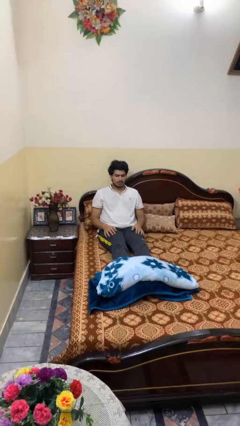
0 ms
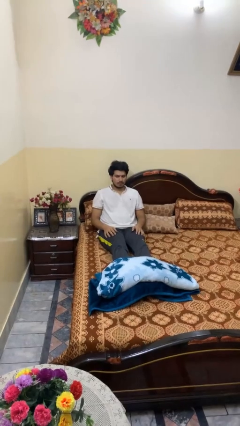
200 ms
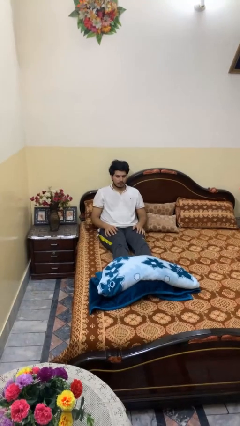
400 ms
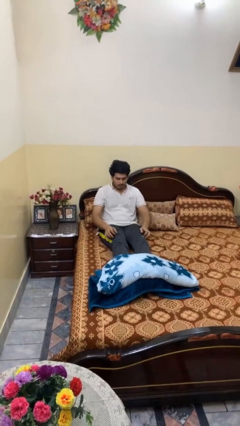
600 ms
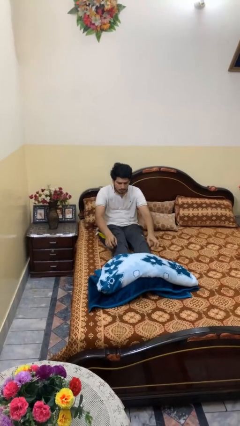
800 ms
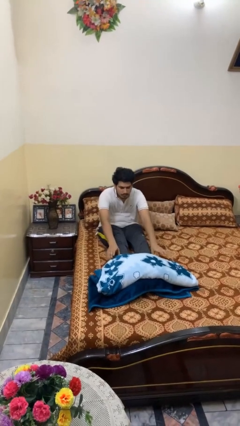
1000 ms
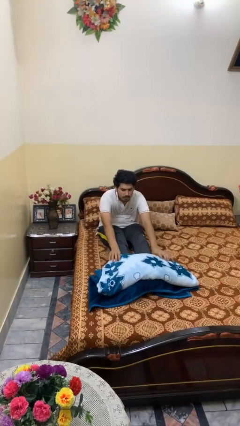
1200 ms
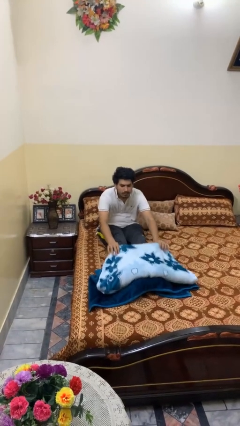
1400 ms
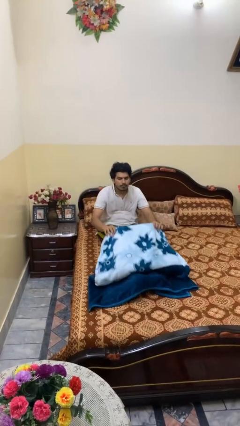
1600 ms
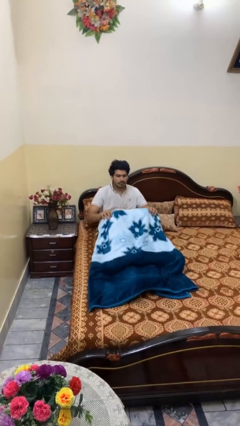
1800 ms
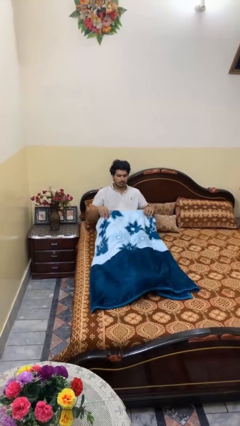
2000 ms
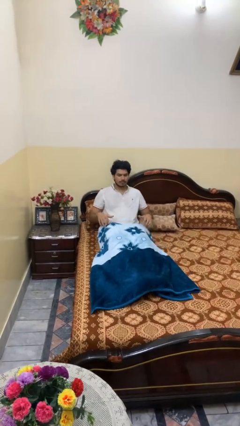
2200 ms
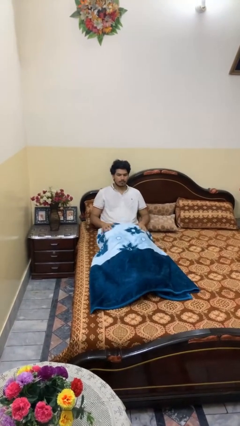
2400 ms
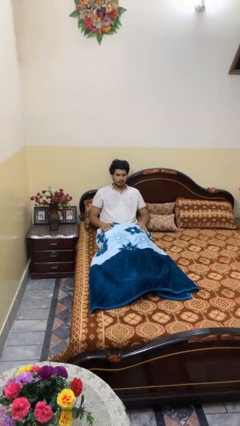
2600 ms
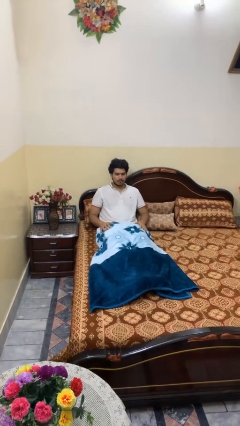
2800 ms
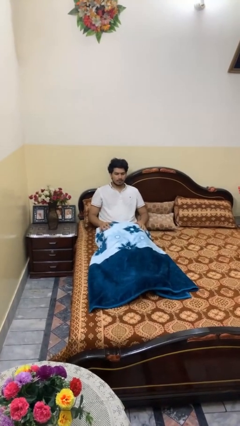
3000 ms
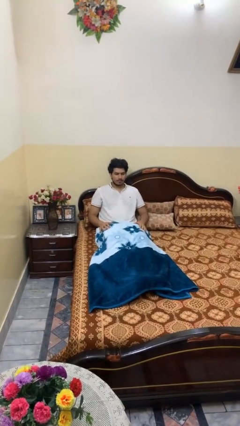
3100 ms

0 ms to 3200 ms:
person covers with blanket

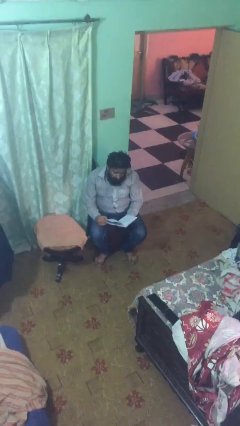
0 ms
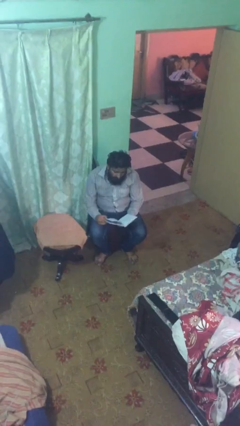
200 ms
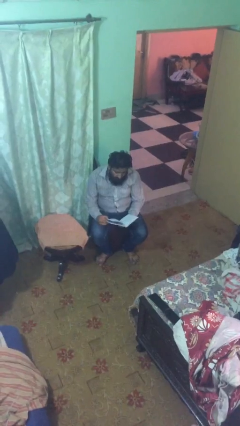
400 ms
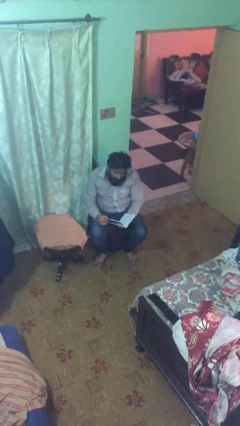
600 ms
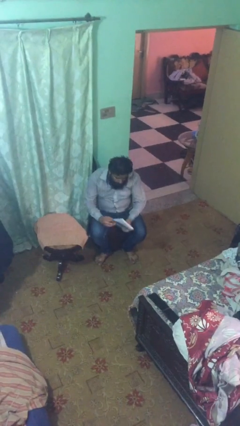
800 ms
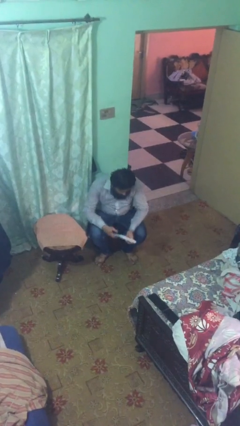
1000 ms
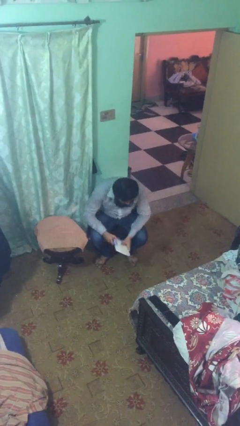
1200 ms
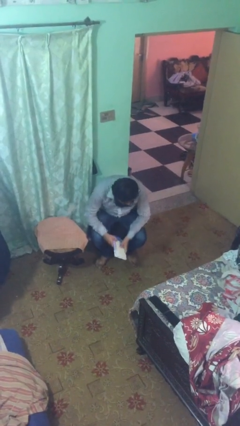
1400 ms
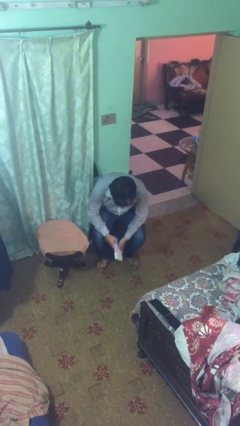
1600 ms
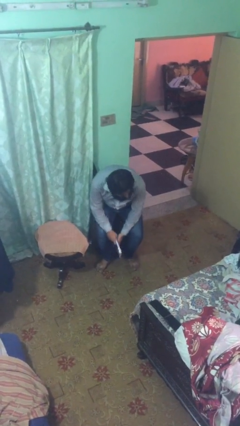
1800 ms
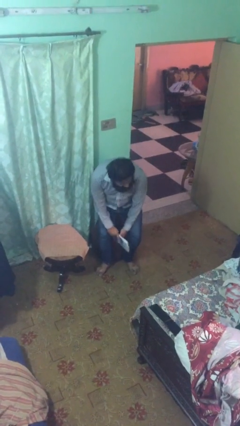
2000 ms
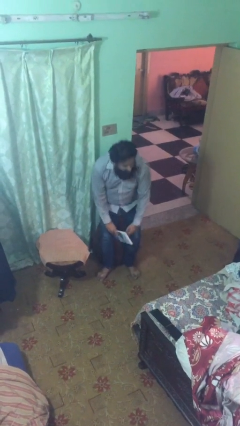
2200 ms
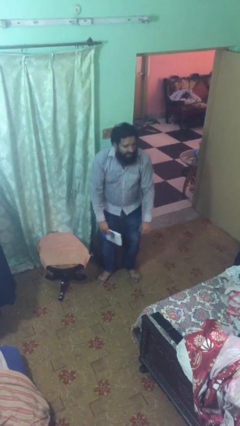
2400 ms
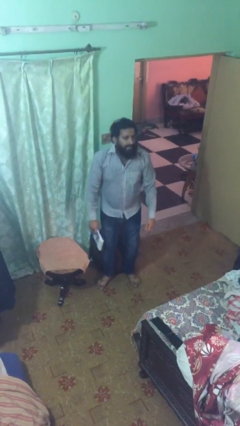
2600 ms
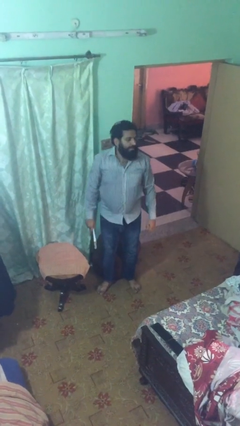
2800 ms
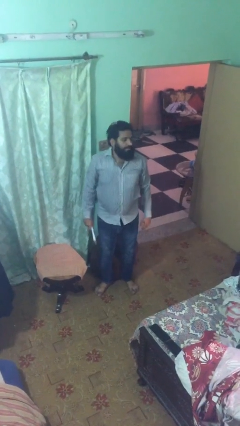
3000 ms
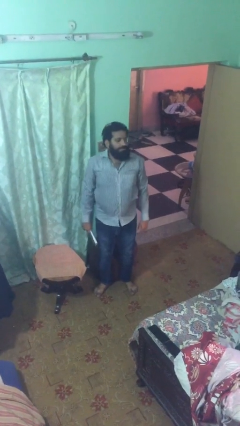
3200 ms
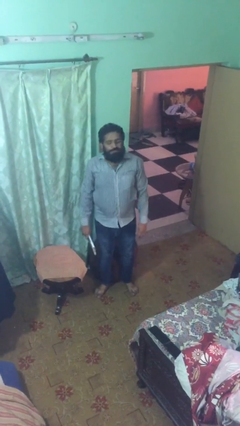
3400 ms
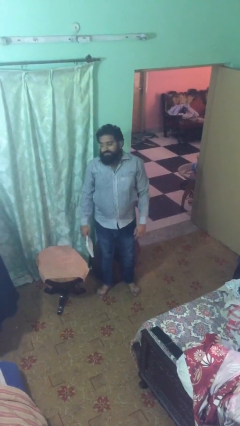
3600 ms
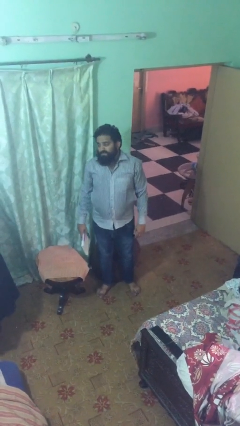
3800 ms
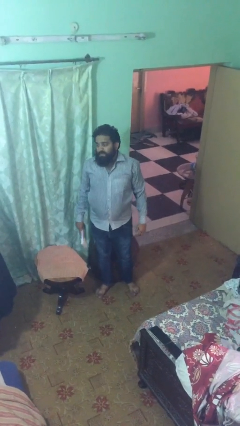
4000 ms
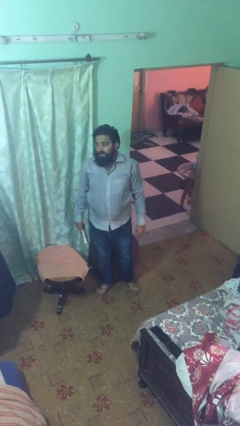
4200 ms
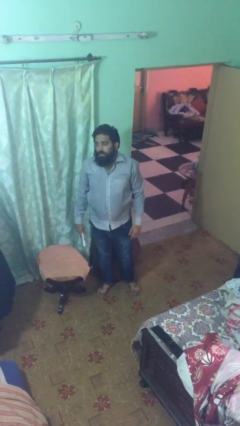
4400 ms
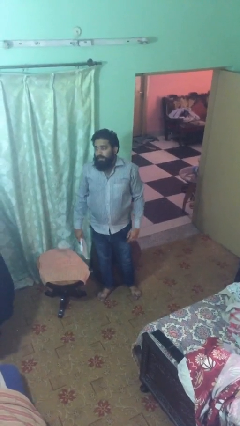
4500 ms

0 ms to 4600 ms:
person stands up

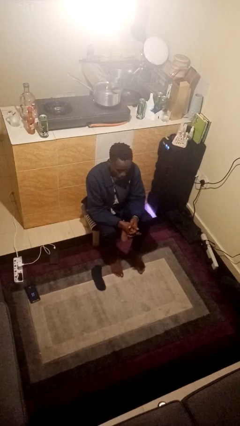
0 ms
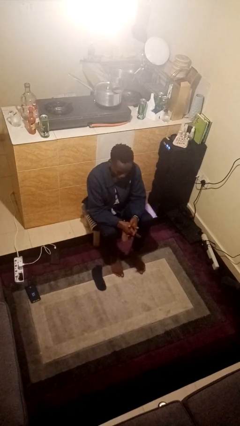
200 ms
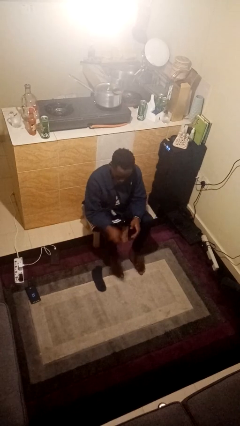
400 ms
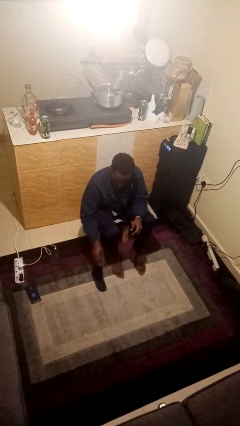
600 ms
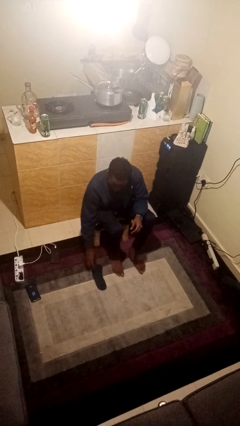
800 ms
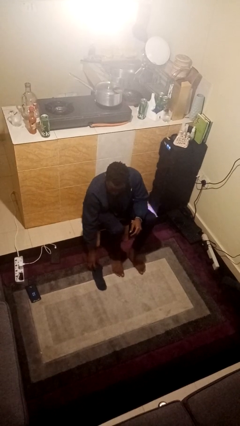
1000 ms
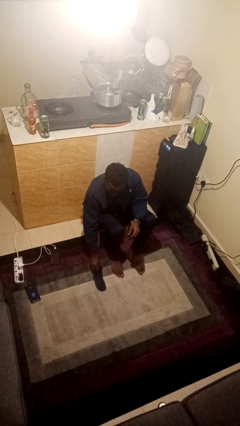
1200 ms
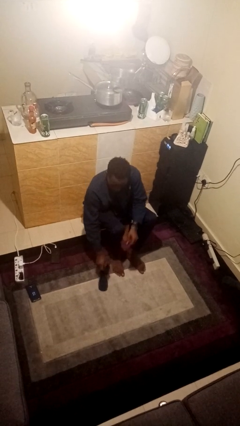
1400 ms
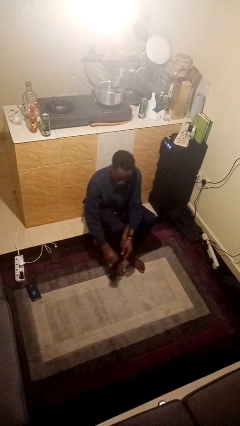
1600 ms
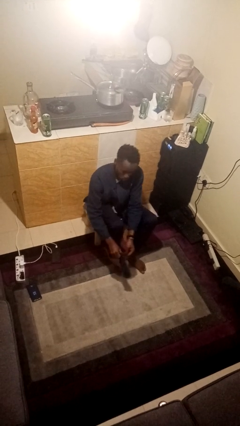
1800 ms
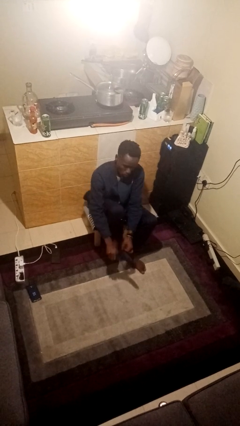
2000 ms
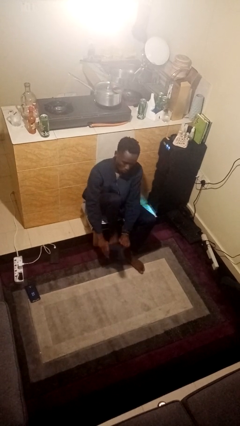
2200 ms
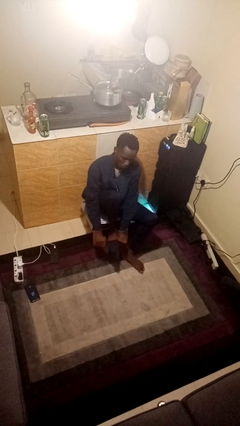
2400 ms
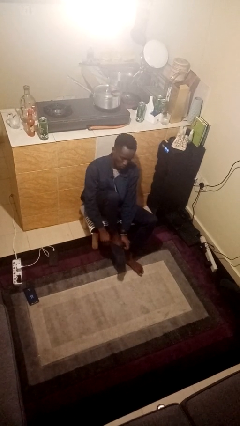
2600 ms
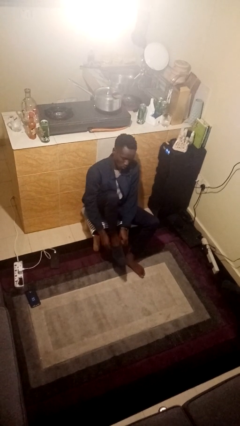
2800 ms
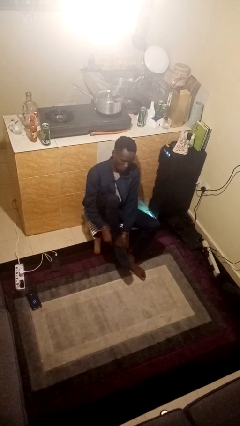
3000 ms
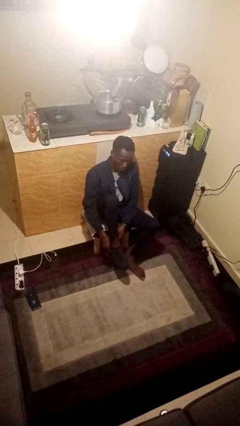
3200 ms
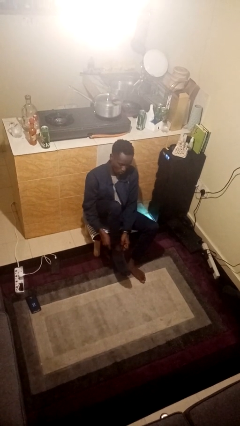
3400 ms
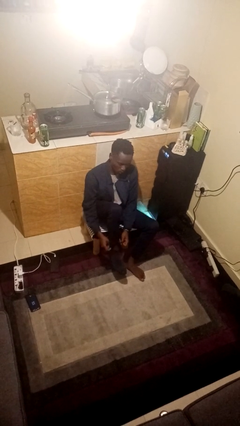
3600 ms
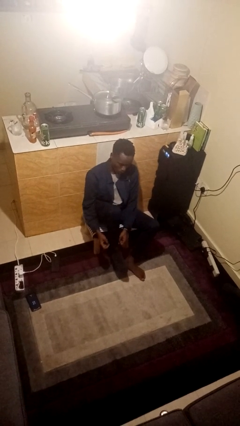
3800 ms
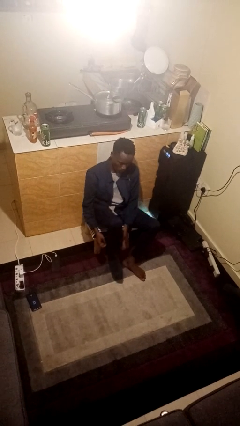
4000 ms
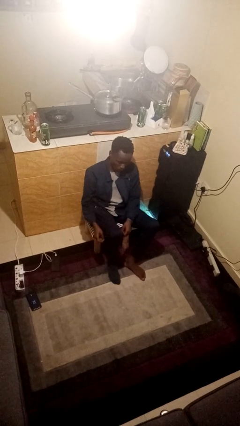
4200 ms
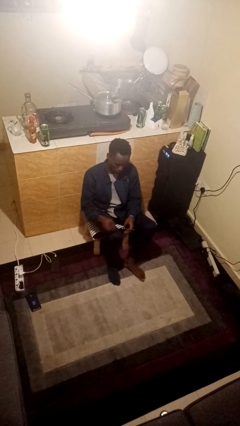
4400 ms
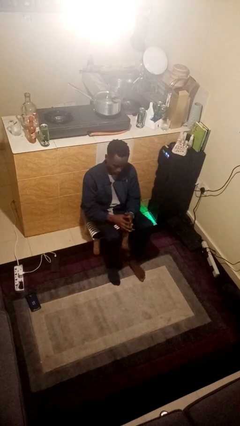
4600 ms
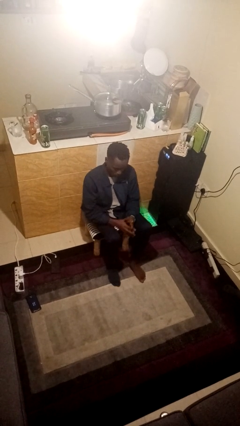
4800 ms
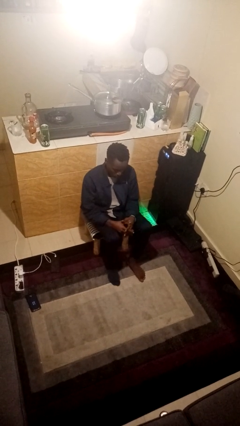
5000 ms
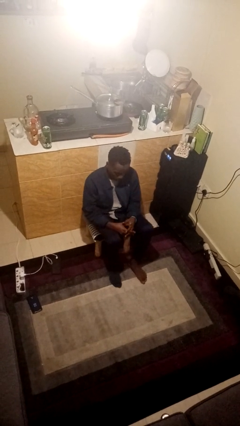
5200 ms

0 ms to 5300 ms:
person puts on socks

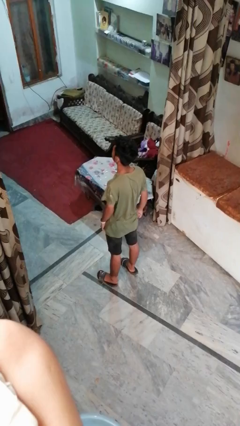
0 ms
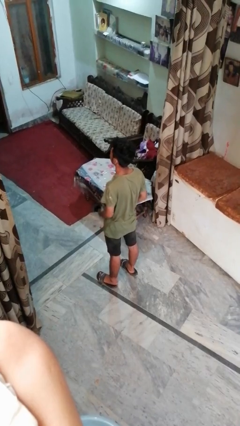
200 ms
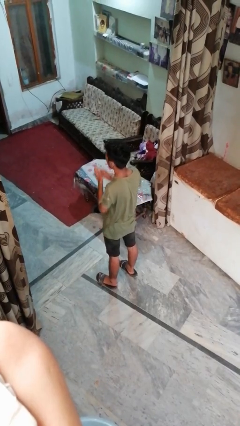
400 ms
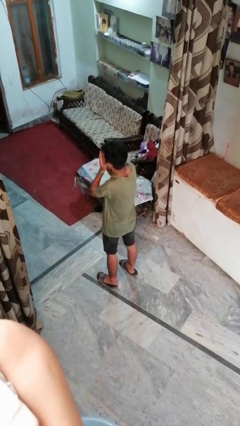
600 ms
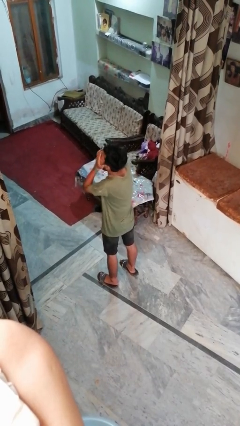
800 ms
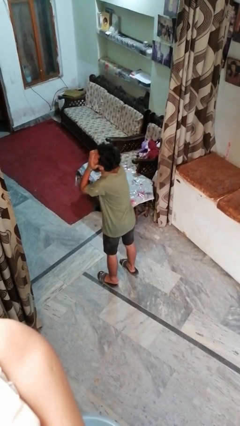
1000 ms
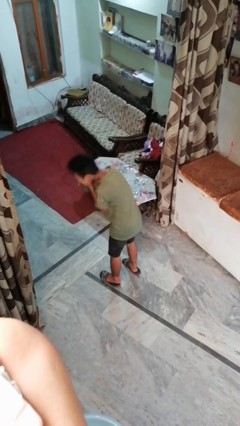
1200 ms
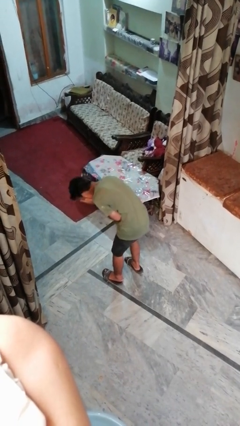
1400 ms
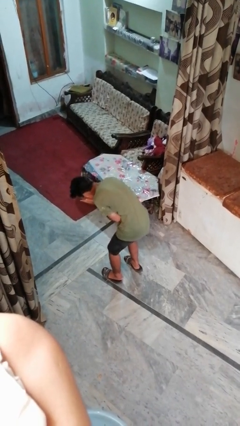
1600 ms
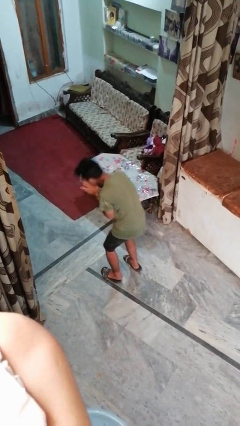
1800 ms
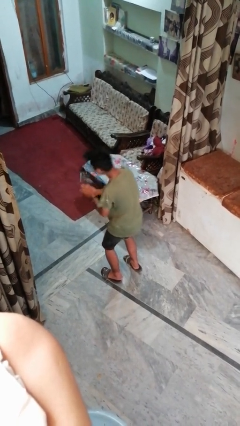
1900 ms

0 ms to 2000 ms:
person sneezes into hand

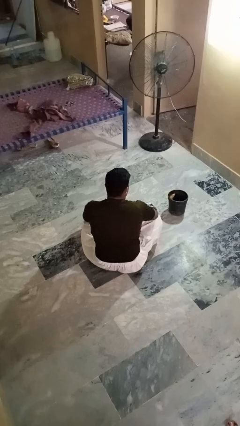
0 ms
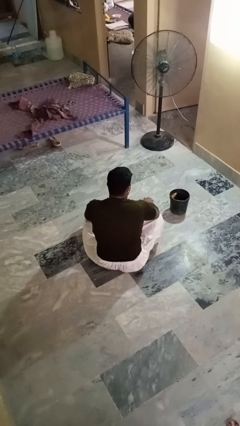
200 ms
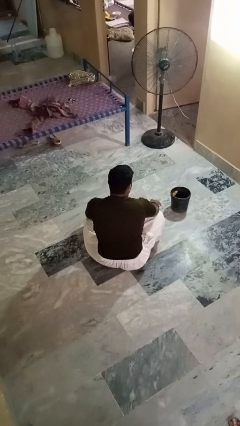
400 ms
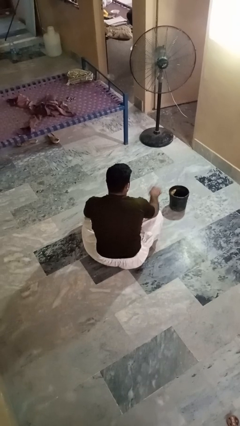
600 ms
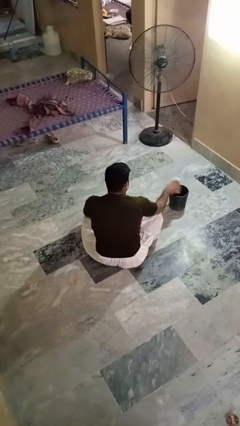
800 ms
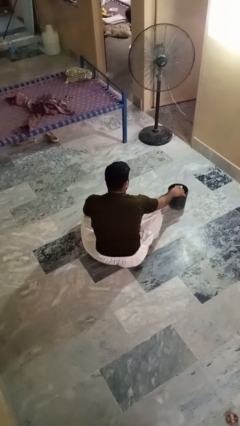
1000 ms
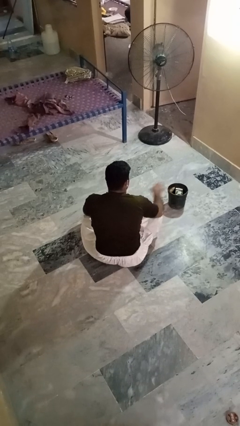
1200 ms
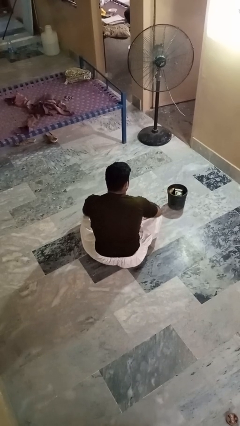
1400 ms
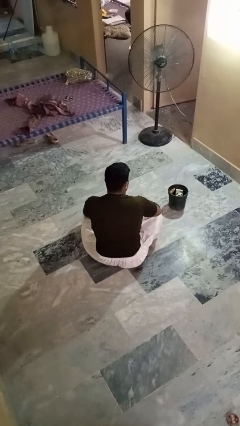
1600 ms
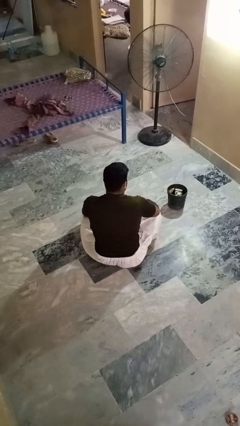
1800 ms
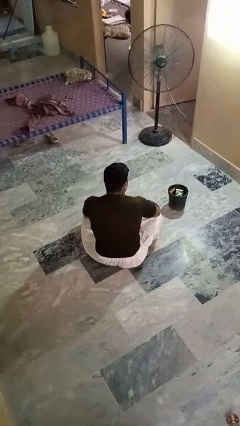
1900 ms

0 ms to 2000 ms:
person puts object into basket

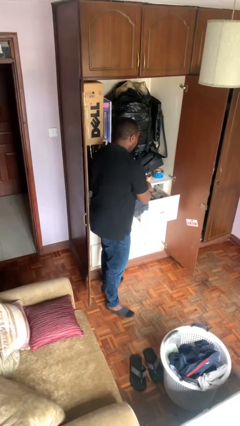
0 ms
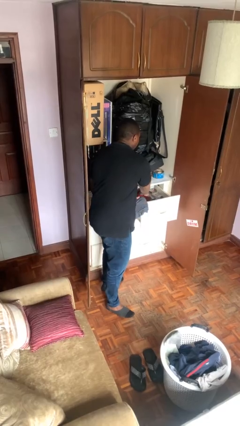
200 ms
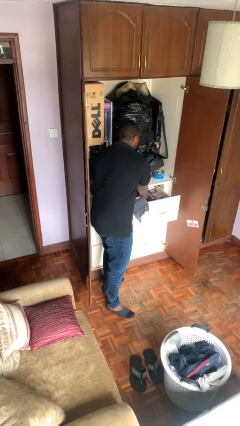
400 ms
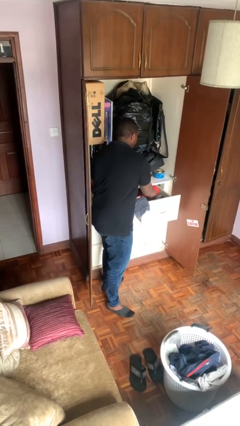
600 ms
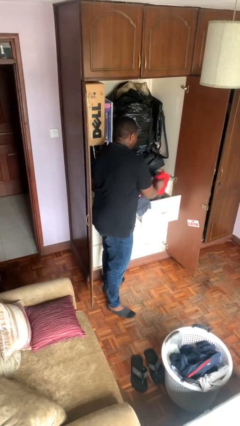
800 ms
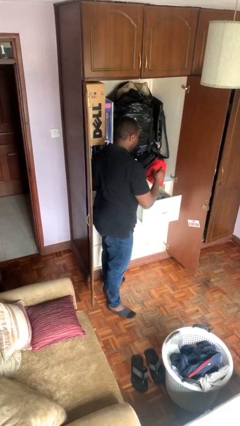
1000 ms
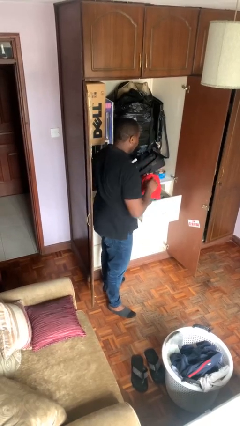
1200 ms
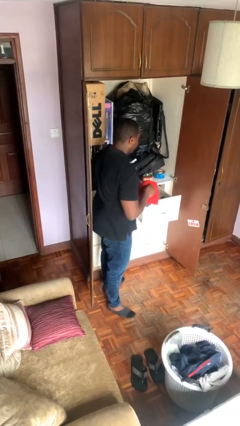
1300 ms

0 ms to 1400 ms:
person takes clothes from dresser
